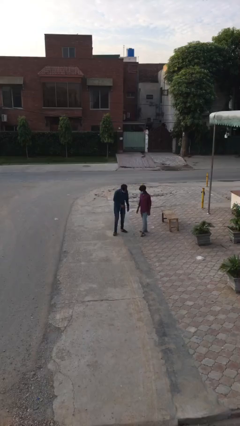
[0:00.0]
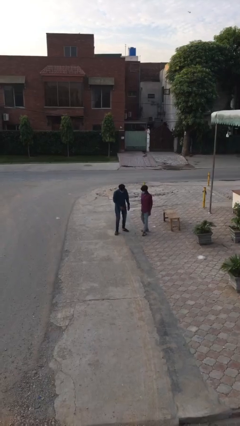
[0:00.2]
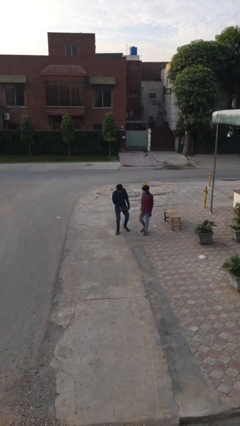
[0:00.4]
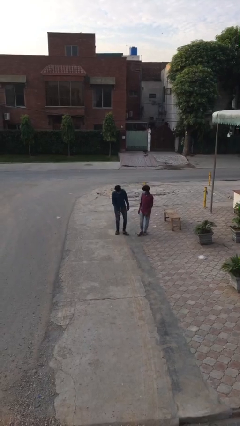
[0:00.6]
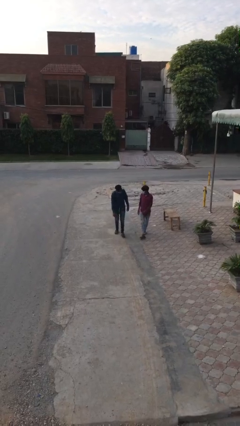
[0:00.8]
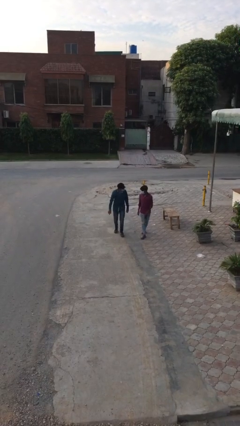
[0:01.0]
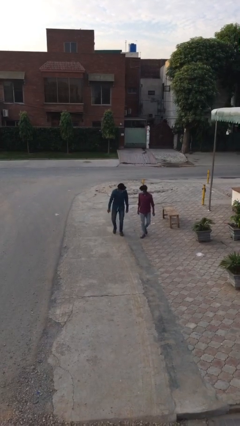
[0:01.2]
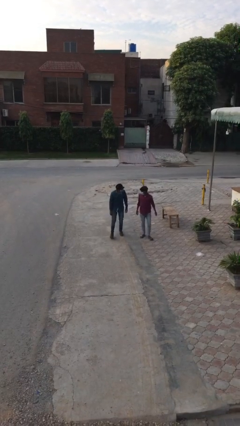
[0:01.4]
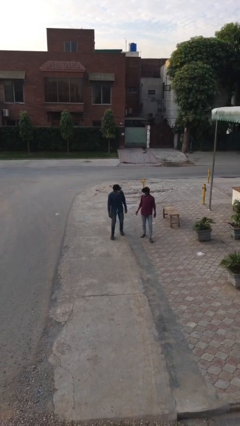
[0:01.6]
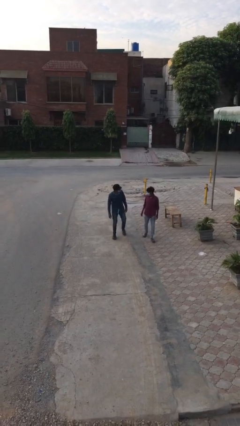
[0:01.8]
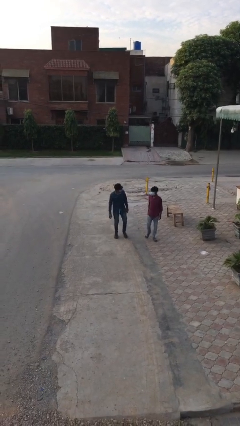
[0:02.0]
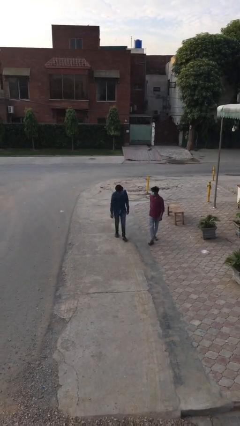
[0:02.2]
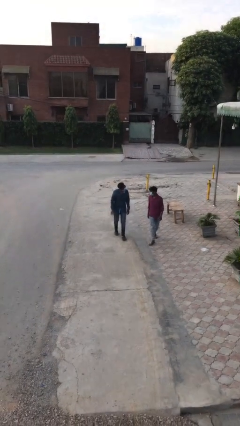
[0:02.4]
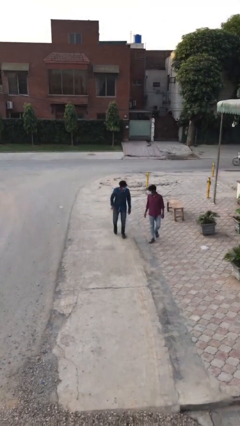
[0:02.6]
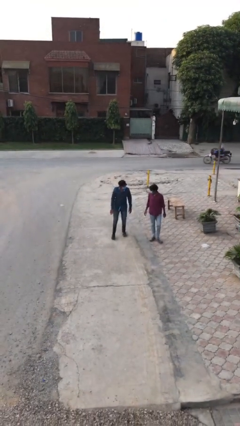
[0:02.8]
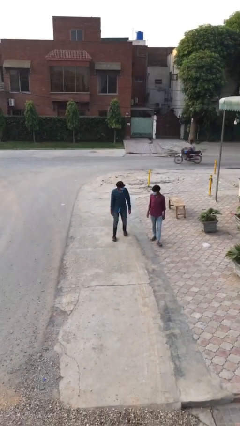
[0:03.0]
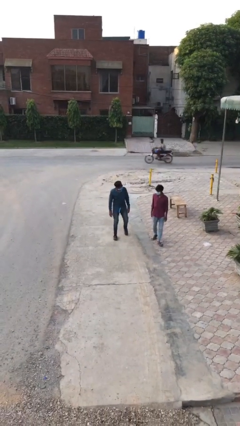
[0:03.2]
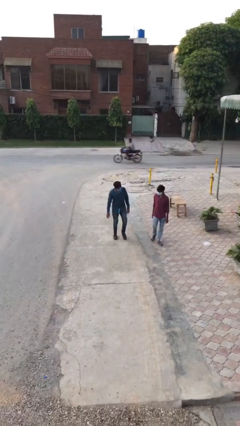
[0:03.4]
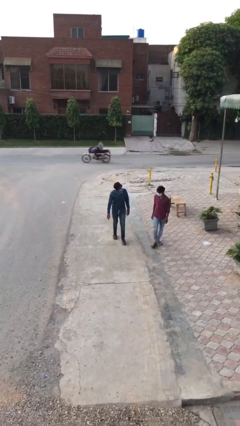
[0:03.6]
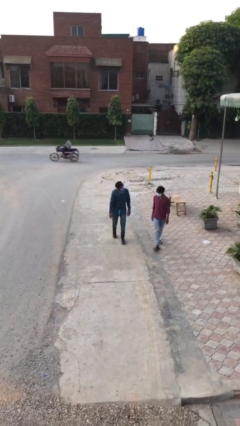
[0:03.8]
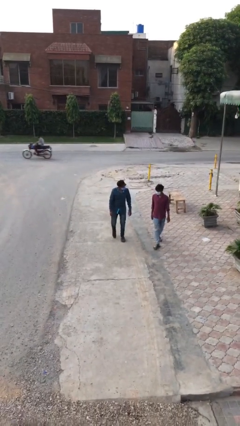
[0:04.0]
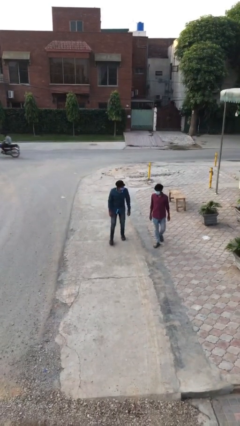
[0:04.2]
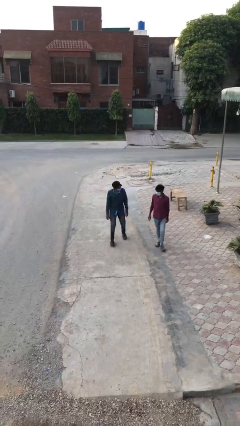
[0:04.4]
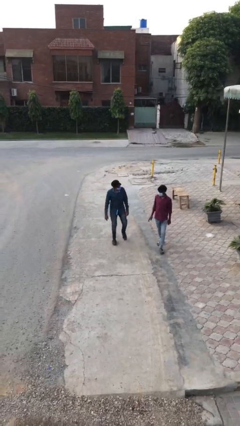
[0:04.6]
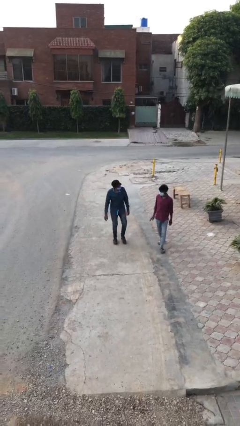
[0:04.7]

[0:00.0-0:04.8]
person talks to person

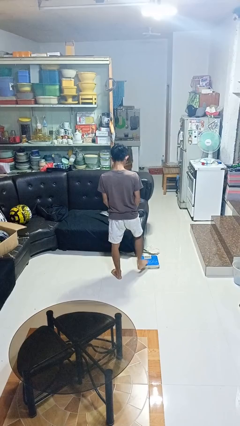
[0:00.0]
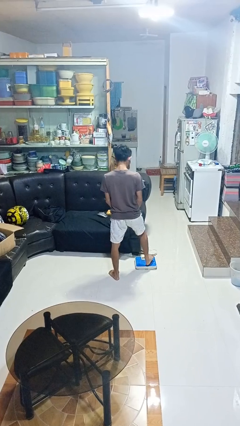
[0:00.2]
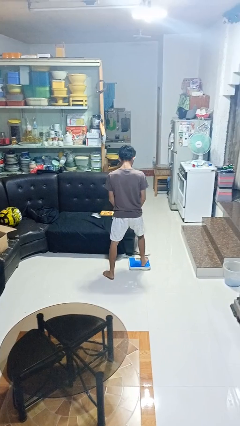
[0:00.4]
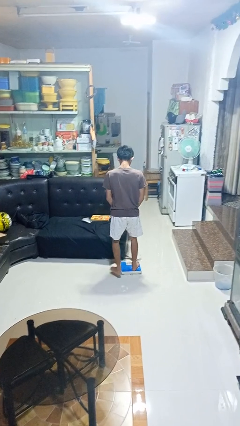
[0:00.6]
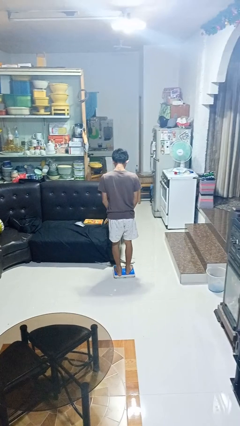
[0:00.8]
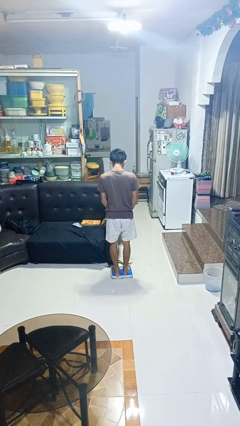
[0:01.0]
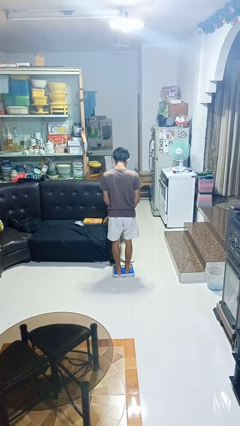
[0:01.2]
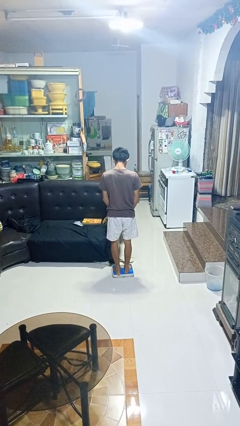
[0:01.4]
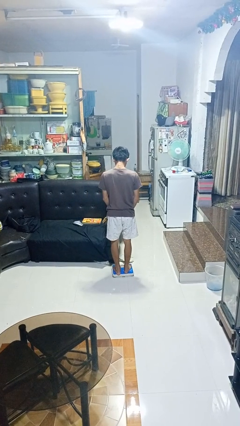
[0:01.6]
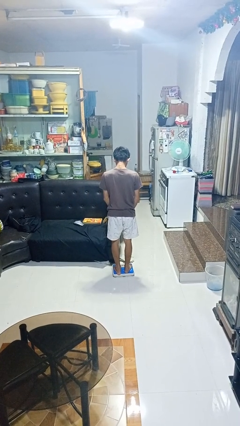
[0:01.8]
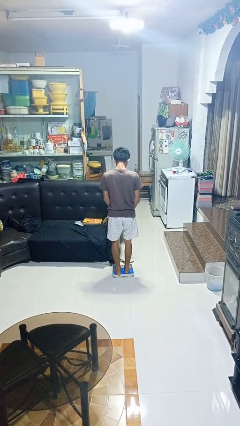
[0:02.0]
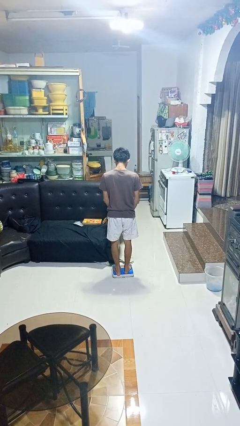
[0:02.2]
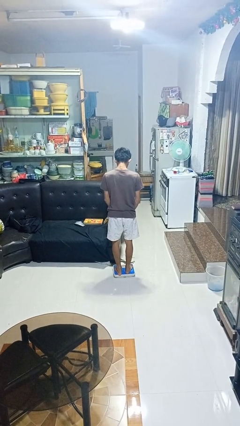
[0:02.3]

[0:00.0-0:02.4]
person uses bodyweight scale

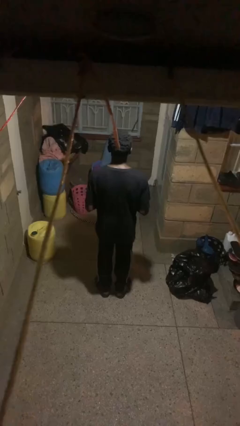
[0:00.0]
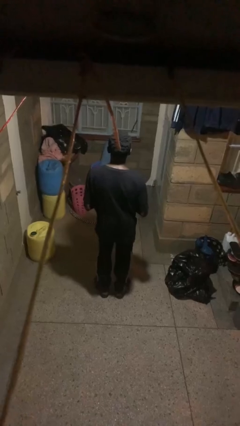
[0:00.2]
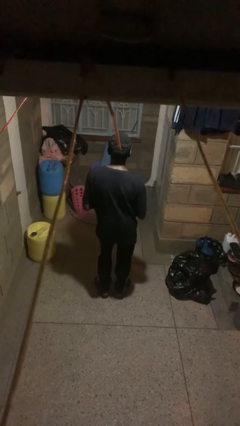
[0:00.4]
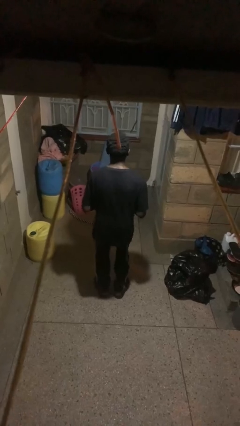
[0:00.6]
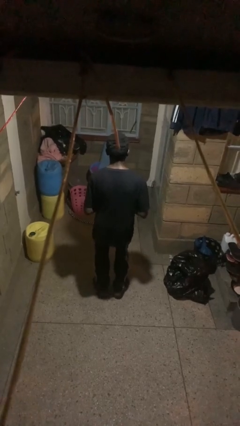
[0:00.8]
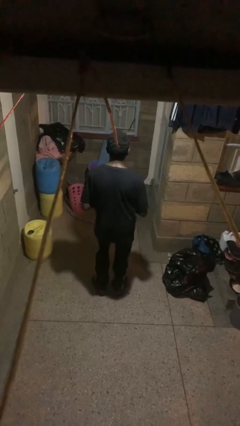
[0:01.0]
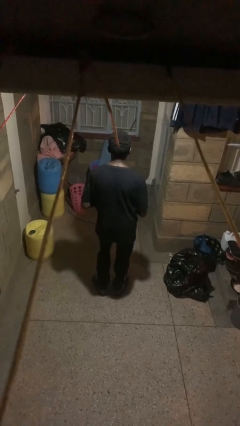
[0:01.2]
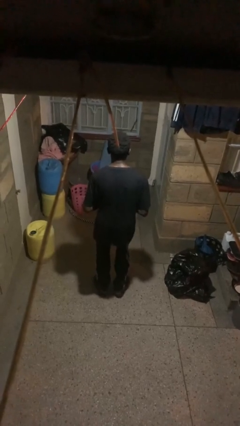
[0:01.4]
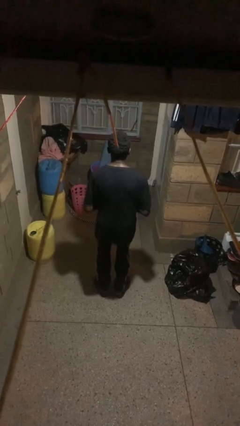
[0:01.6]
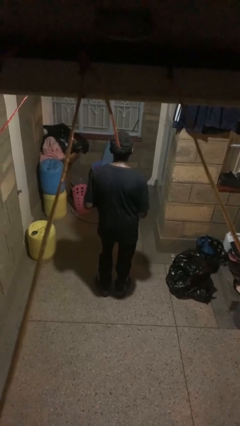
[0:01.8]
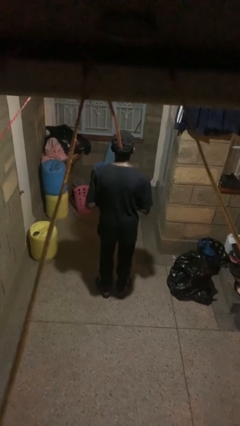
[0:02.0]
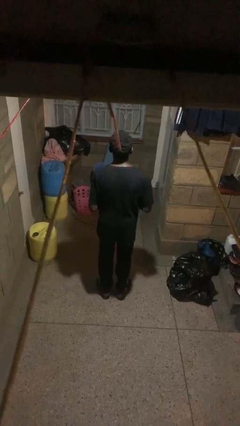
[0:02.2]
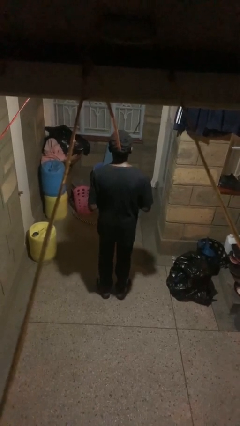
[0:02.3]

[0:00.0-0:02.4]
person wiggles hips

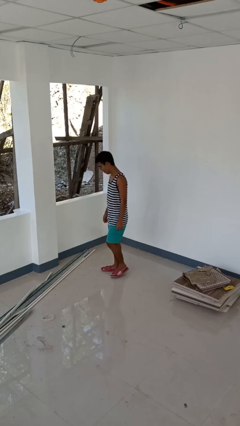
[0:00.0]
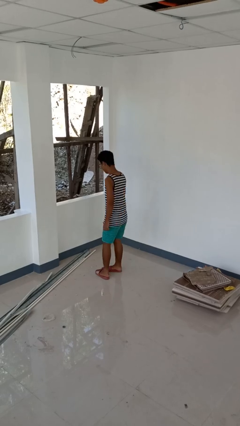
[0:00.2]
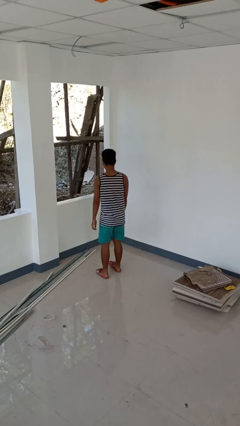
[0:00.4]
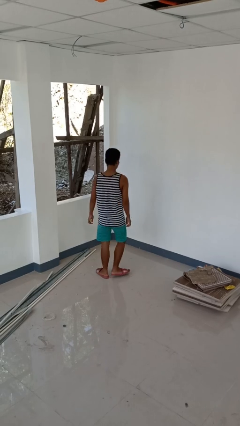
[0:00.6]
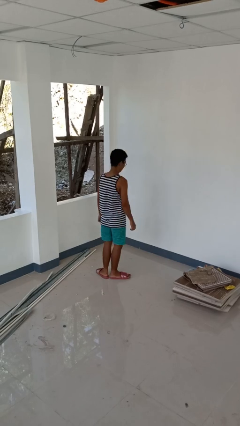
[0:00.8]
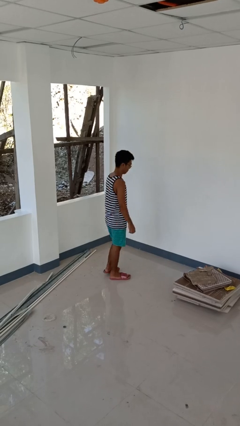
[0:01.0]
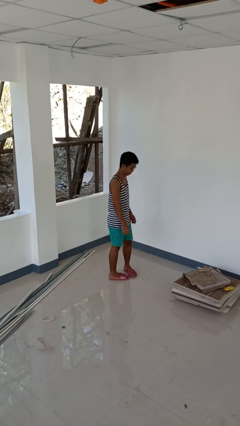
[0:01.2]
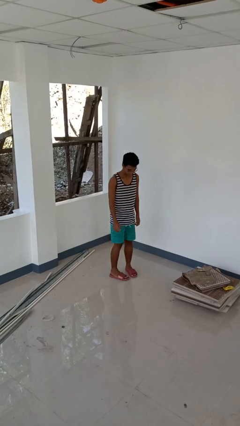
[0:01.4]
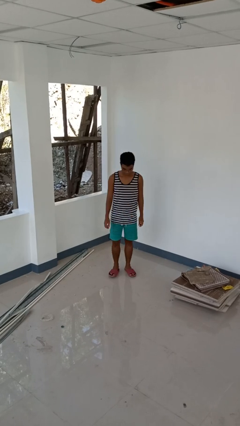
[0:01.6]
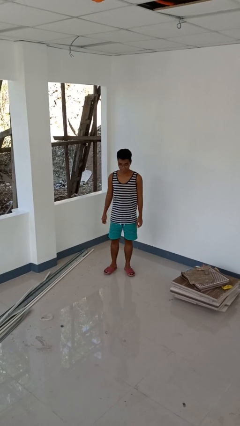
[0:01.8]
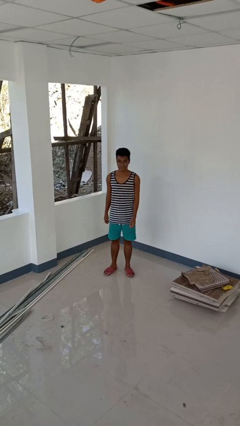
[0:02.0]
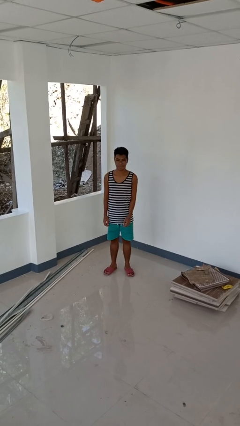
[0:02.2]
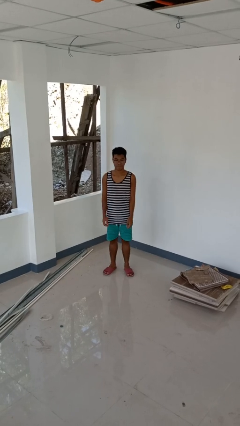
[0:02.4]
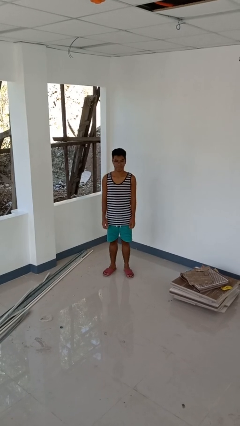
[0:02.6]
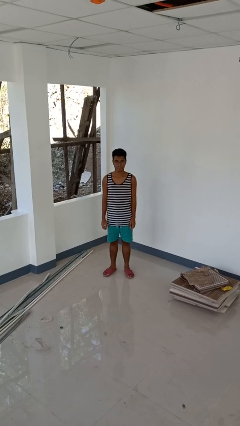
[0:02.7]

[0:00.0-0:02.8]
person twirls

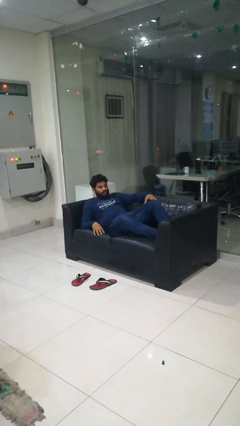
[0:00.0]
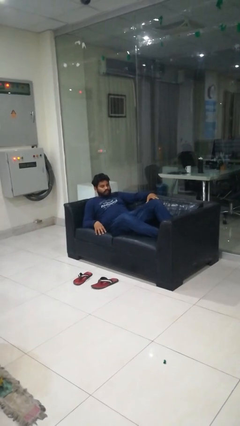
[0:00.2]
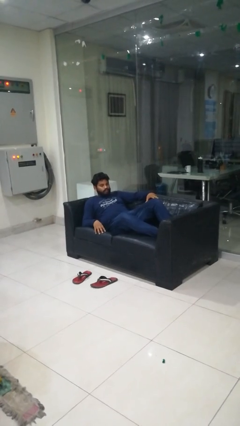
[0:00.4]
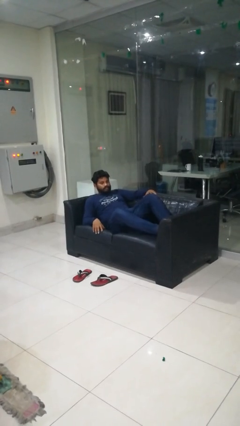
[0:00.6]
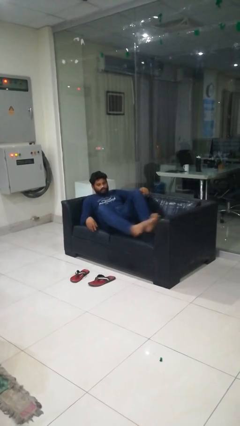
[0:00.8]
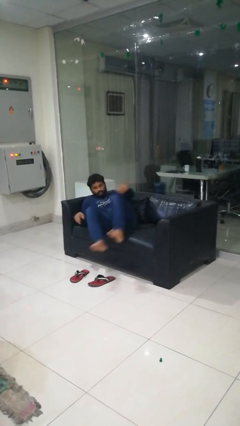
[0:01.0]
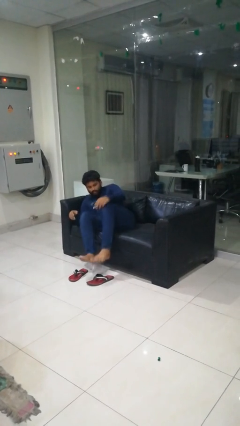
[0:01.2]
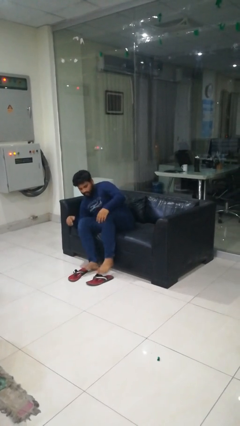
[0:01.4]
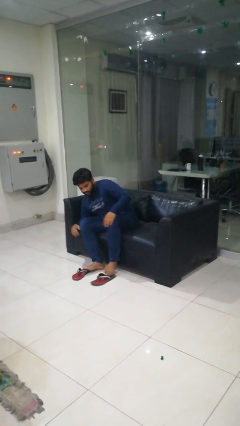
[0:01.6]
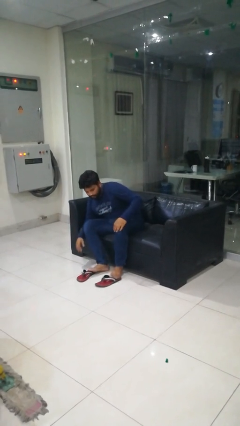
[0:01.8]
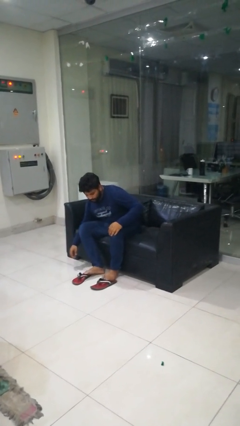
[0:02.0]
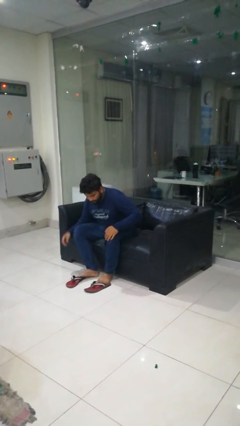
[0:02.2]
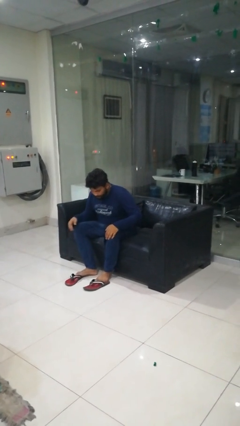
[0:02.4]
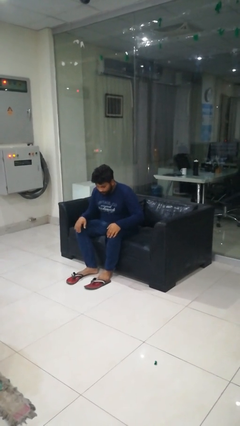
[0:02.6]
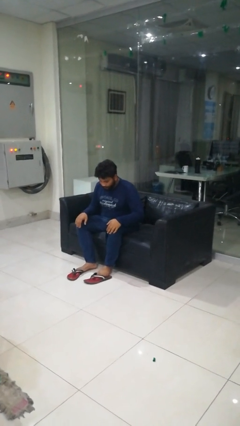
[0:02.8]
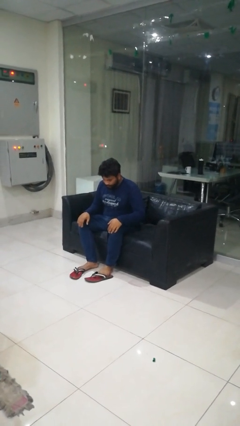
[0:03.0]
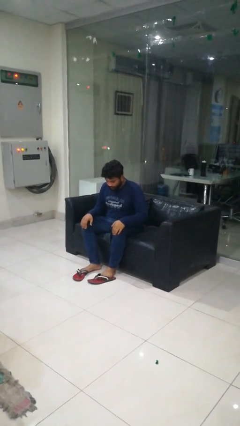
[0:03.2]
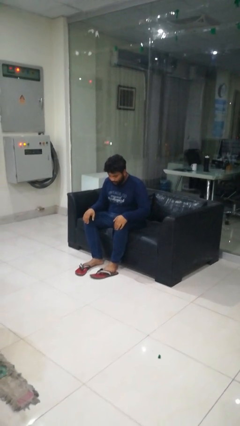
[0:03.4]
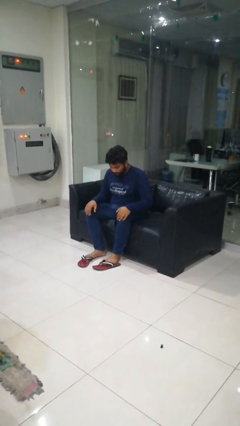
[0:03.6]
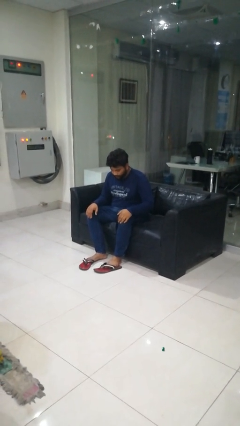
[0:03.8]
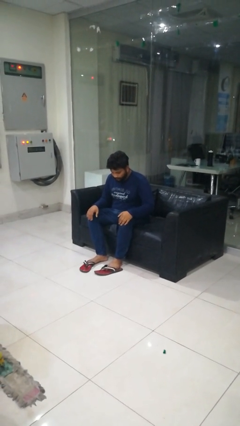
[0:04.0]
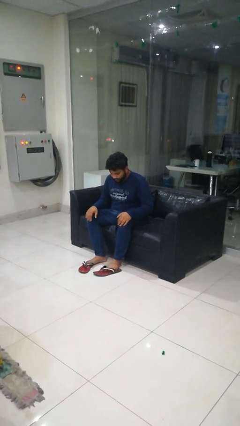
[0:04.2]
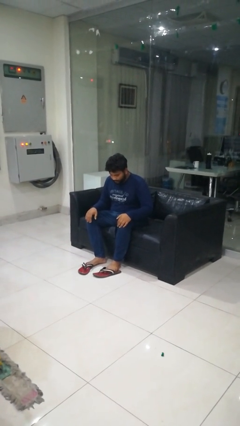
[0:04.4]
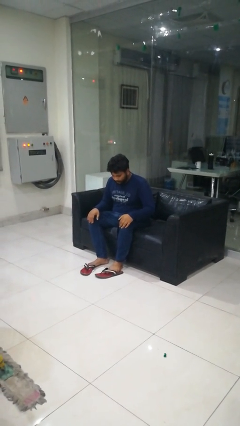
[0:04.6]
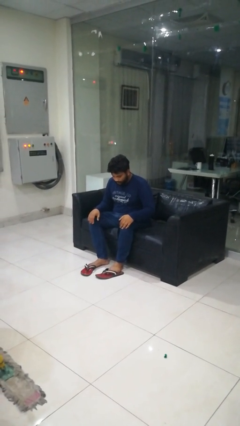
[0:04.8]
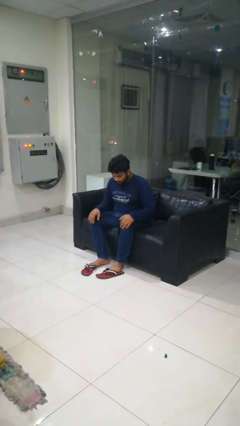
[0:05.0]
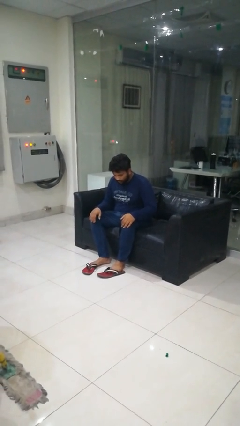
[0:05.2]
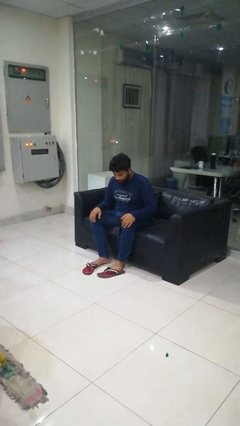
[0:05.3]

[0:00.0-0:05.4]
person stands up
